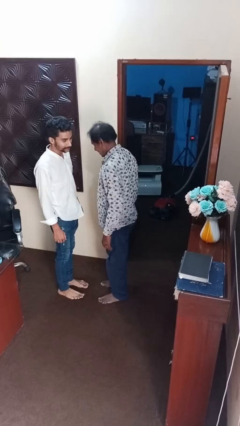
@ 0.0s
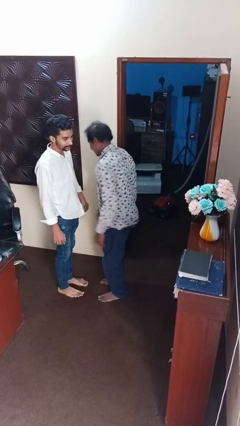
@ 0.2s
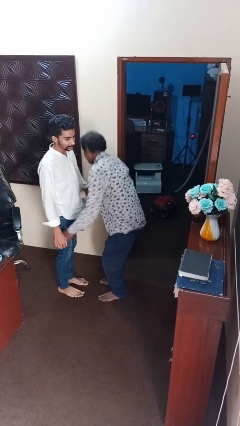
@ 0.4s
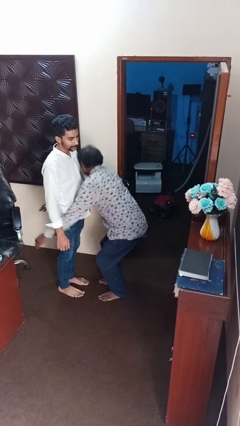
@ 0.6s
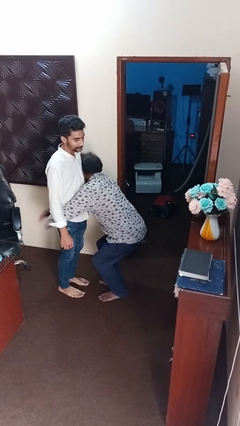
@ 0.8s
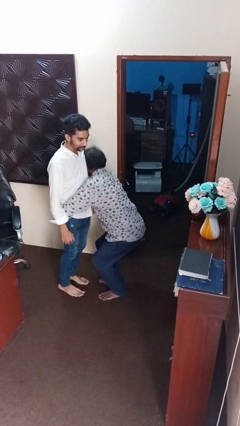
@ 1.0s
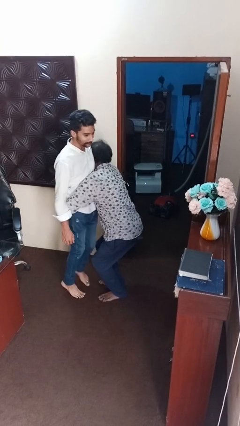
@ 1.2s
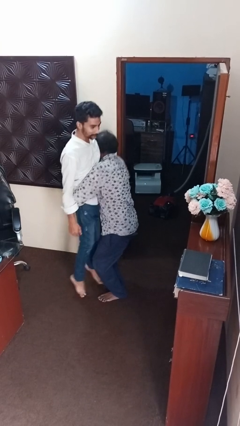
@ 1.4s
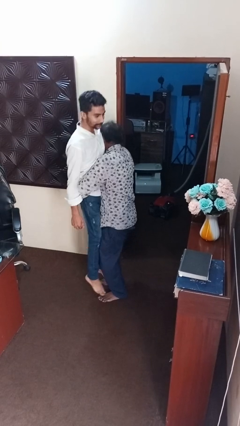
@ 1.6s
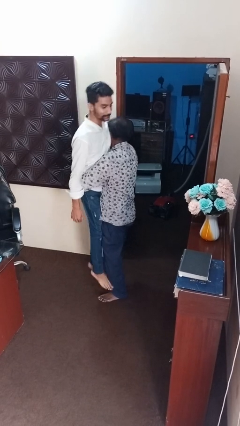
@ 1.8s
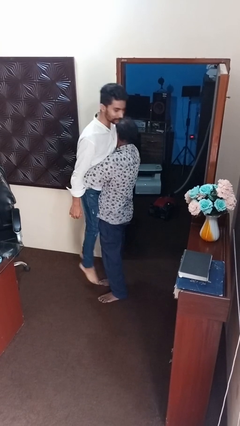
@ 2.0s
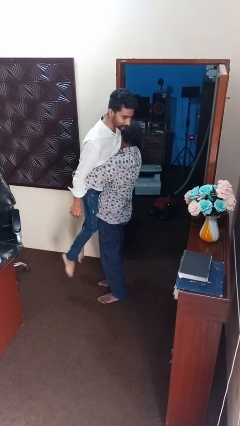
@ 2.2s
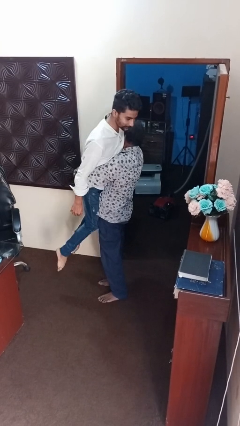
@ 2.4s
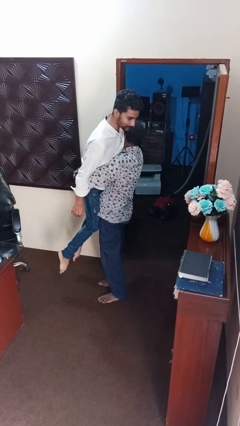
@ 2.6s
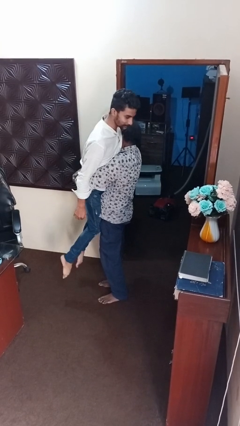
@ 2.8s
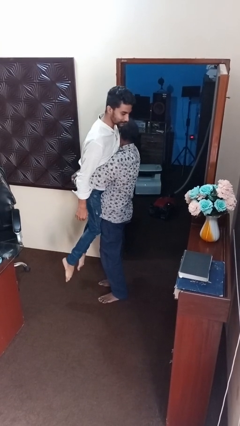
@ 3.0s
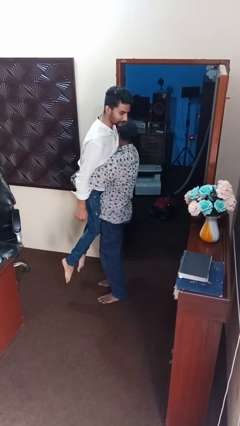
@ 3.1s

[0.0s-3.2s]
person picks up person

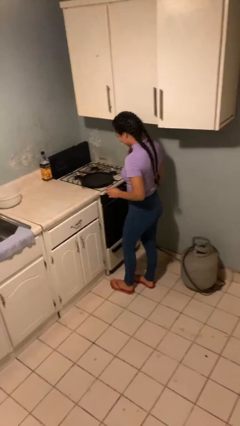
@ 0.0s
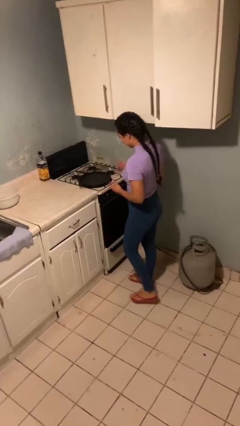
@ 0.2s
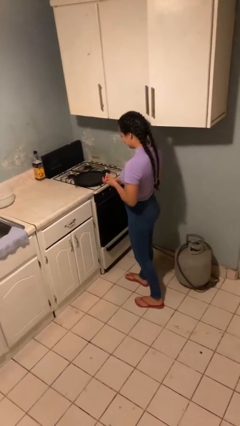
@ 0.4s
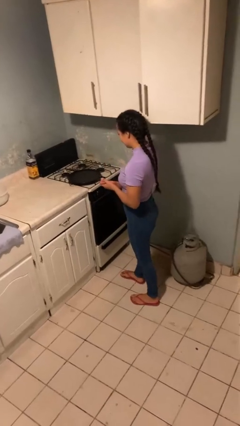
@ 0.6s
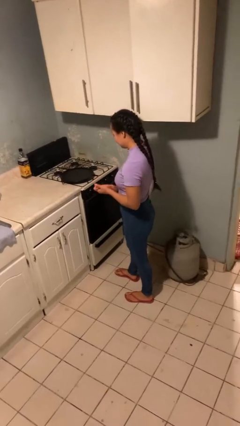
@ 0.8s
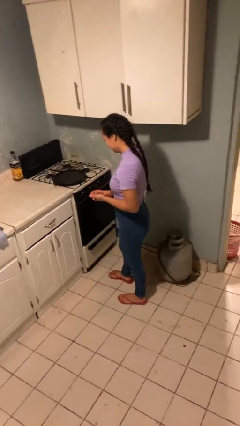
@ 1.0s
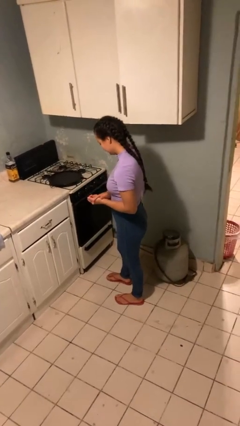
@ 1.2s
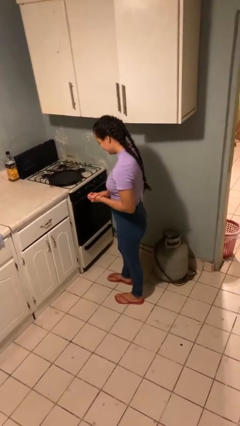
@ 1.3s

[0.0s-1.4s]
person burns hand

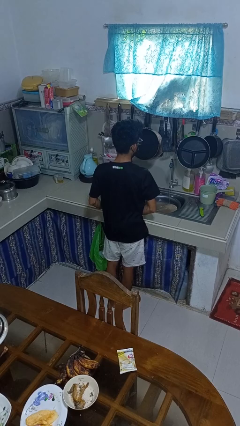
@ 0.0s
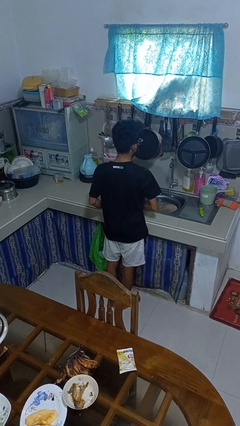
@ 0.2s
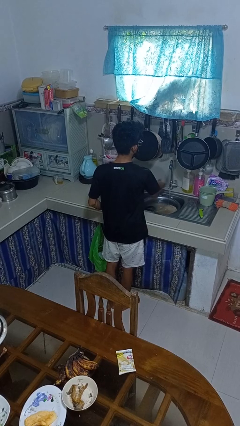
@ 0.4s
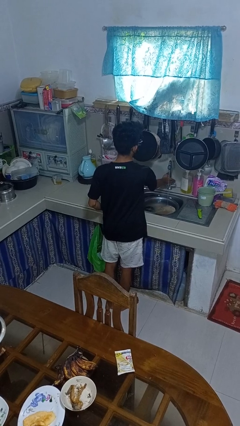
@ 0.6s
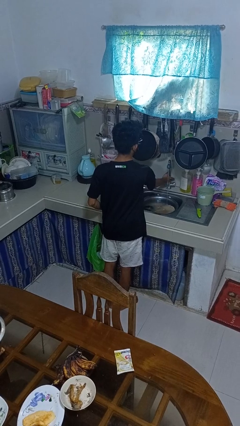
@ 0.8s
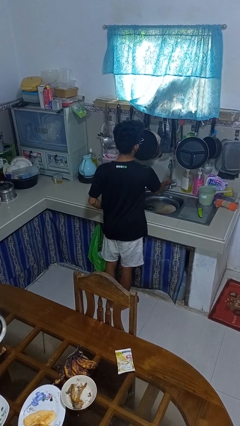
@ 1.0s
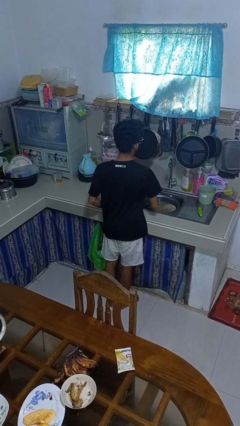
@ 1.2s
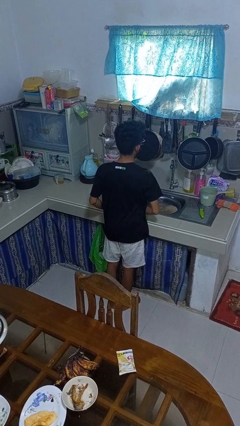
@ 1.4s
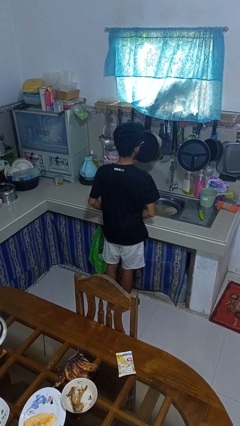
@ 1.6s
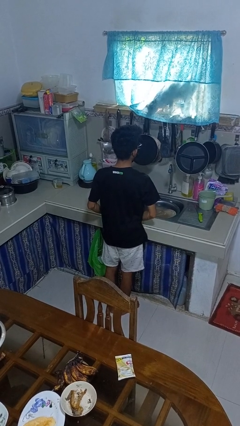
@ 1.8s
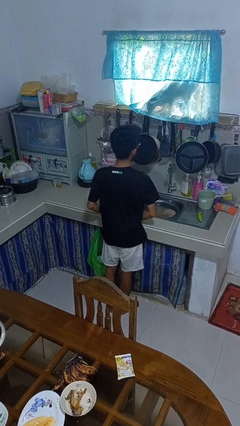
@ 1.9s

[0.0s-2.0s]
person turns off faucet

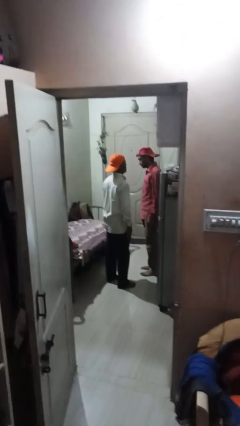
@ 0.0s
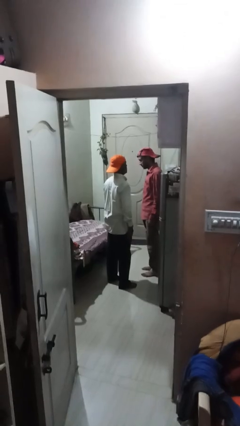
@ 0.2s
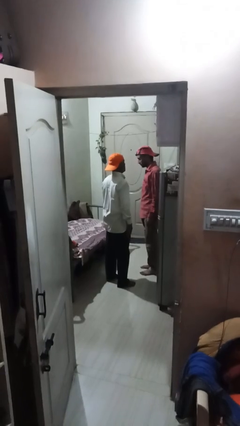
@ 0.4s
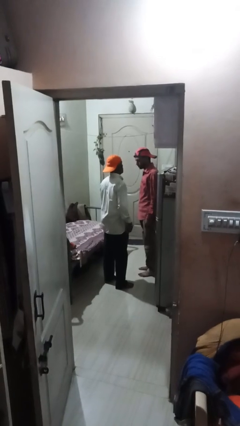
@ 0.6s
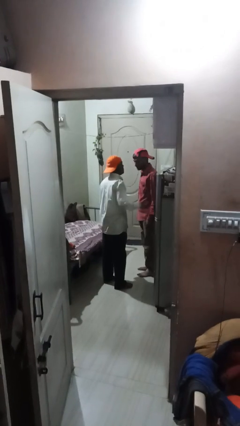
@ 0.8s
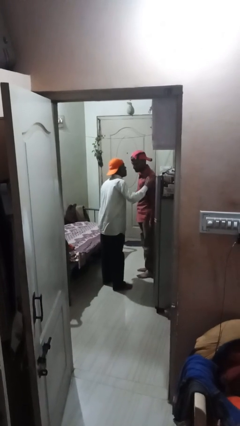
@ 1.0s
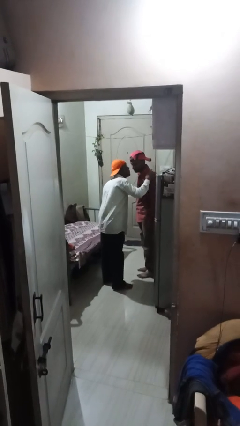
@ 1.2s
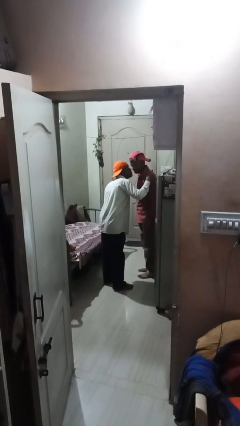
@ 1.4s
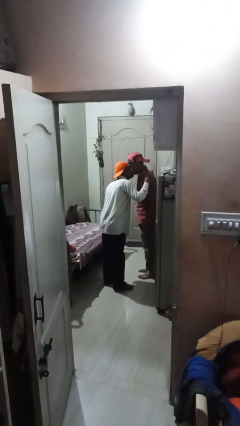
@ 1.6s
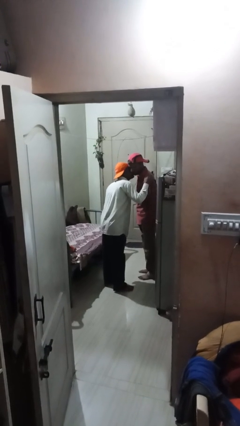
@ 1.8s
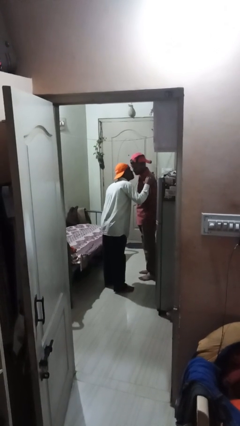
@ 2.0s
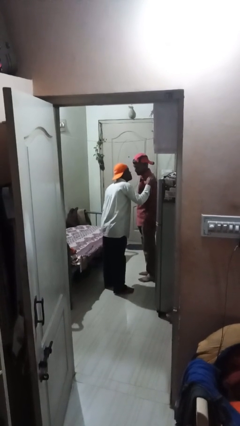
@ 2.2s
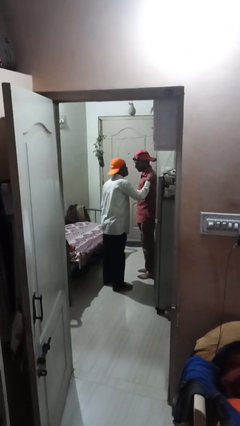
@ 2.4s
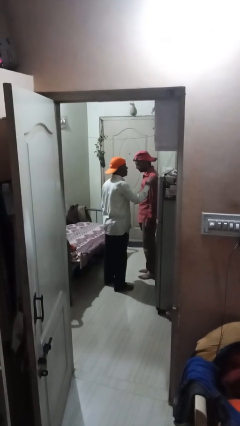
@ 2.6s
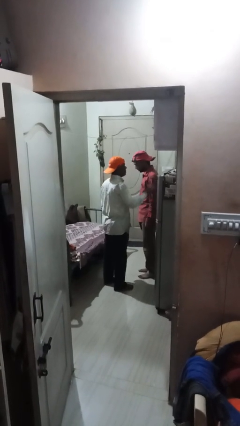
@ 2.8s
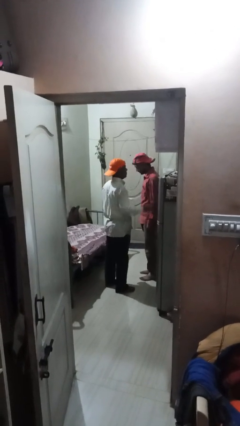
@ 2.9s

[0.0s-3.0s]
person kisses cheek of person

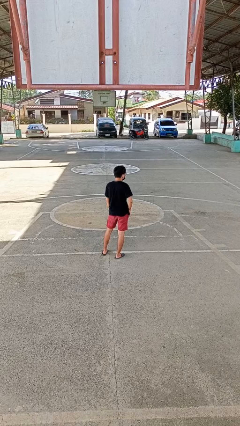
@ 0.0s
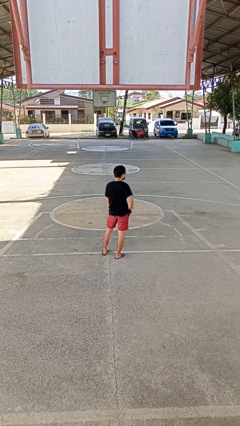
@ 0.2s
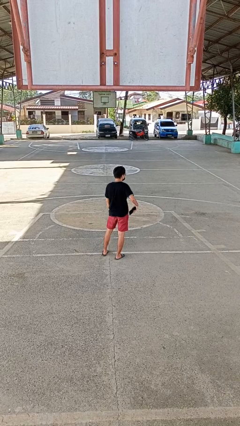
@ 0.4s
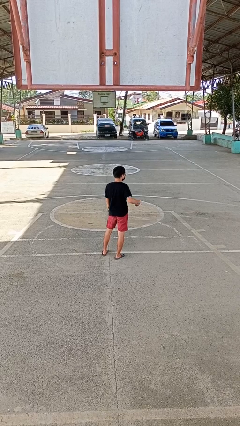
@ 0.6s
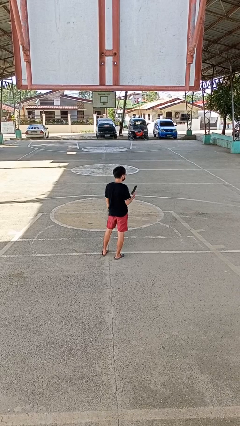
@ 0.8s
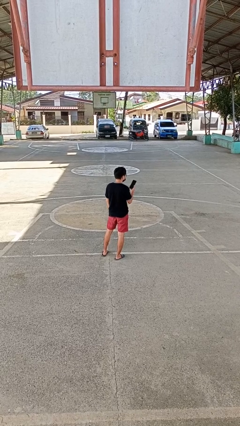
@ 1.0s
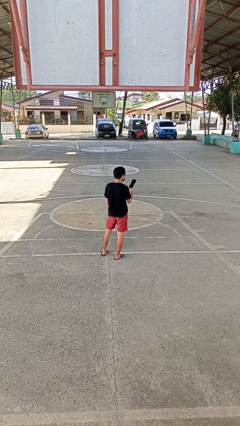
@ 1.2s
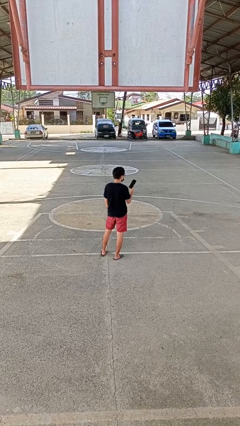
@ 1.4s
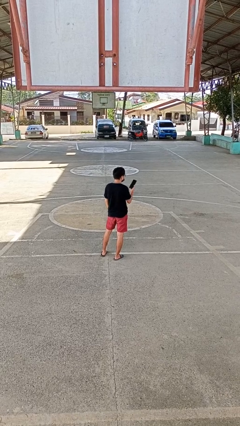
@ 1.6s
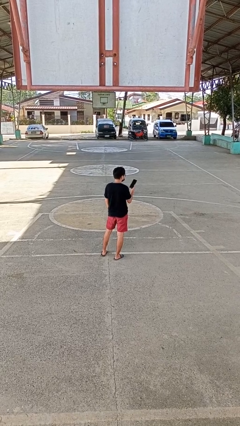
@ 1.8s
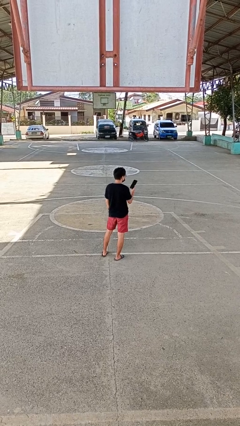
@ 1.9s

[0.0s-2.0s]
person takes phone from pocket

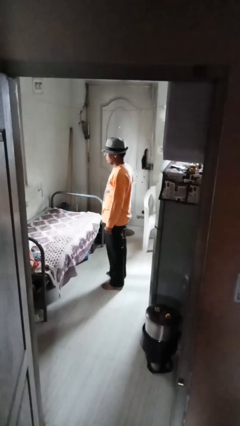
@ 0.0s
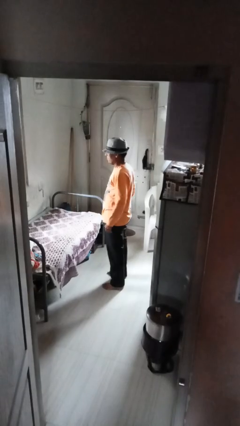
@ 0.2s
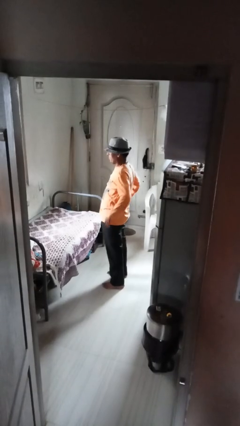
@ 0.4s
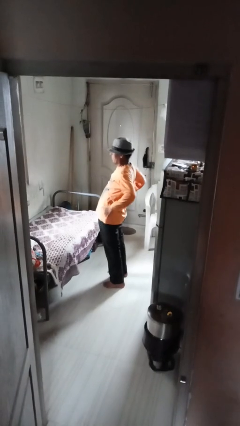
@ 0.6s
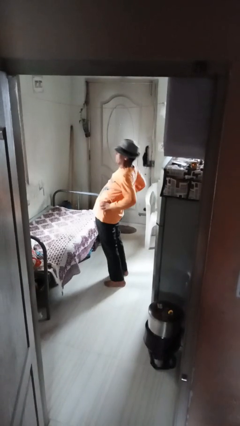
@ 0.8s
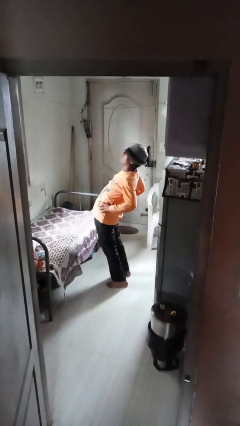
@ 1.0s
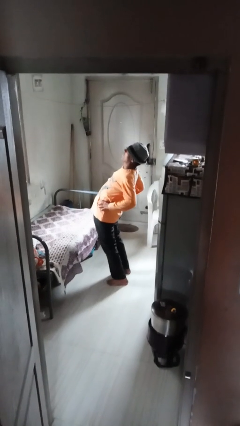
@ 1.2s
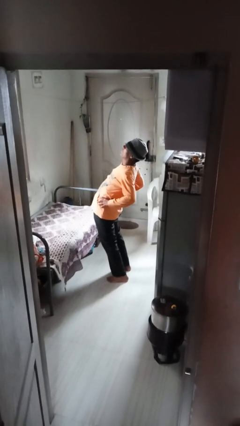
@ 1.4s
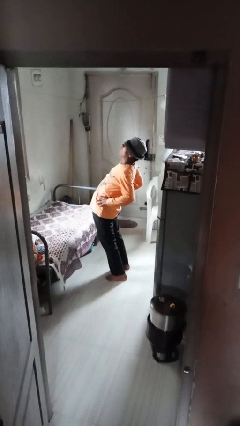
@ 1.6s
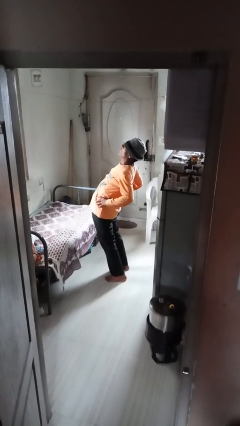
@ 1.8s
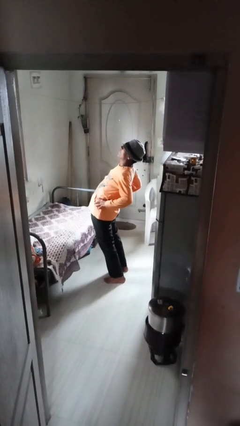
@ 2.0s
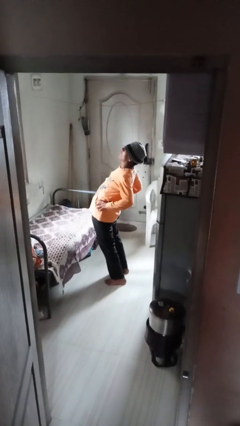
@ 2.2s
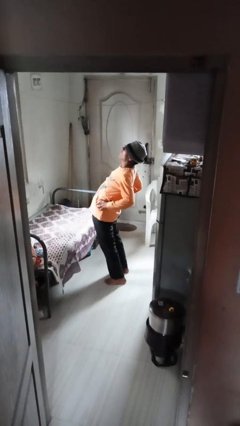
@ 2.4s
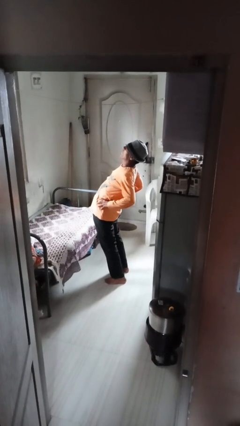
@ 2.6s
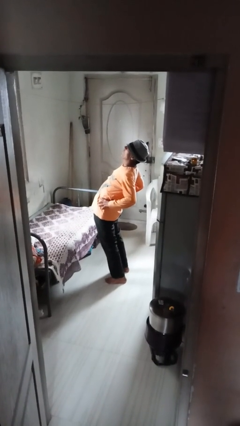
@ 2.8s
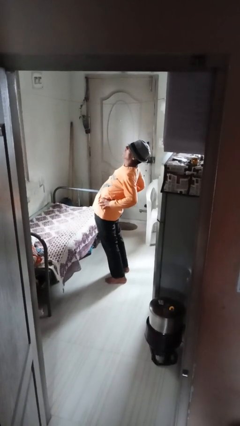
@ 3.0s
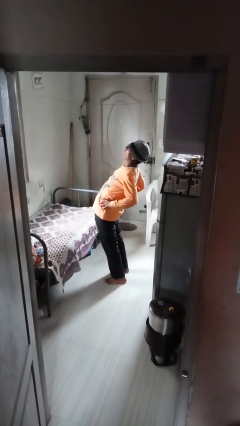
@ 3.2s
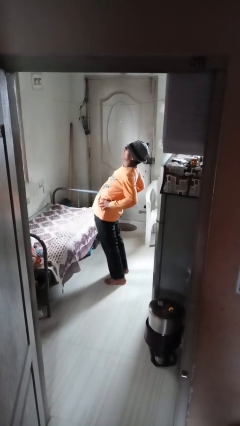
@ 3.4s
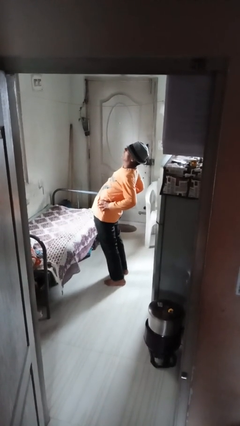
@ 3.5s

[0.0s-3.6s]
person stretches back

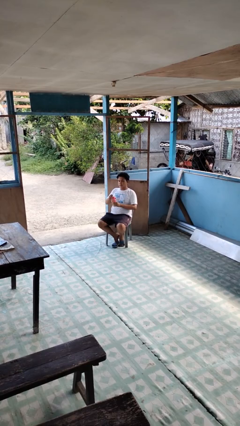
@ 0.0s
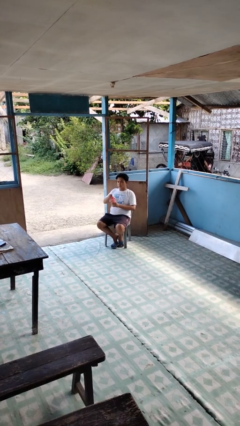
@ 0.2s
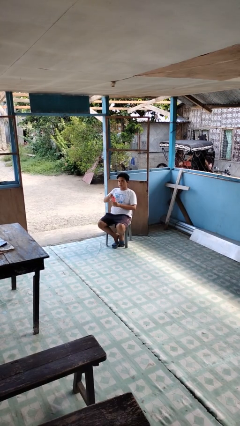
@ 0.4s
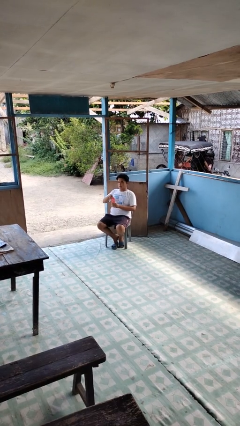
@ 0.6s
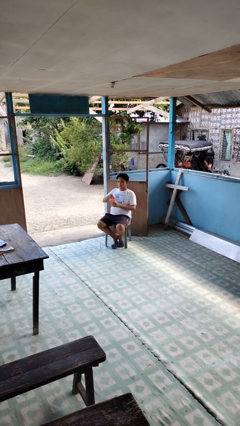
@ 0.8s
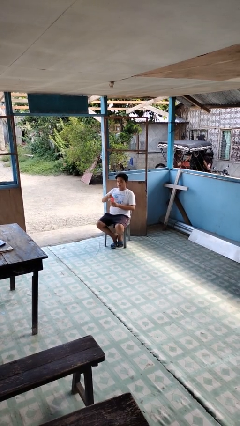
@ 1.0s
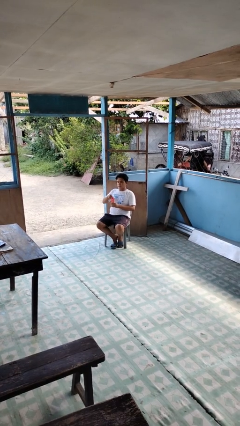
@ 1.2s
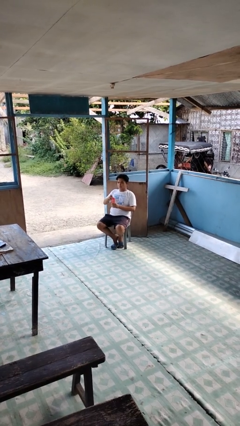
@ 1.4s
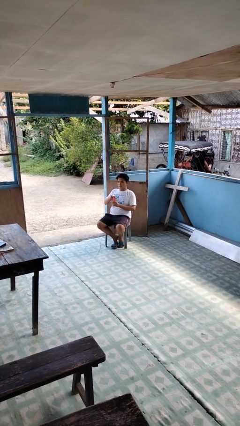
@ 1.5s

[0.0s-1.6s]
person opens beverage can

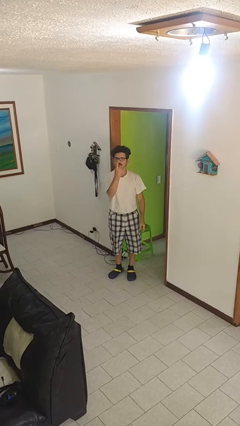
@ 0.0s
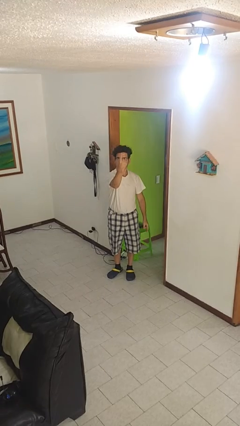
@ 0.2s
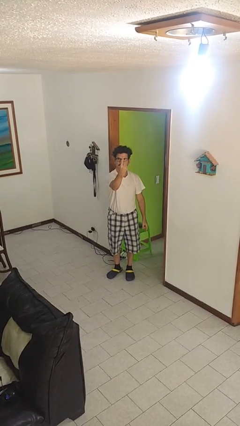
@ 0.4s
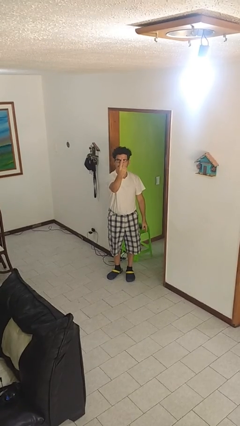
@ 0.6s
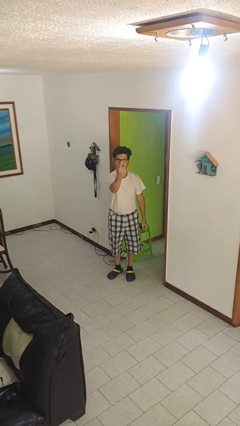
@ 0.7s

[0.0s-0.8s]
person gestures number one
